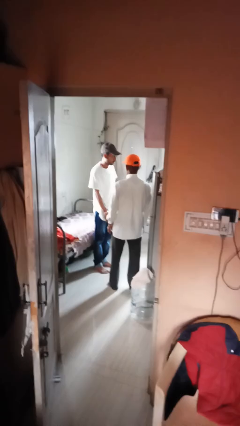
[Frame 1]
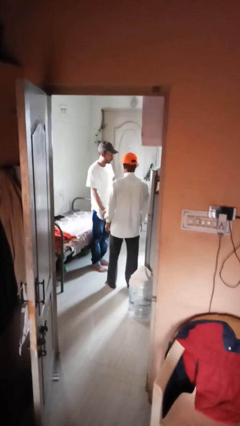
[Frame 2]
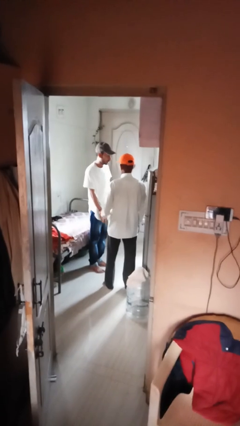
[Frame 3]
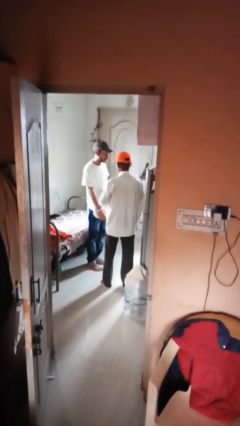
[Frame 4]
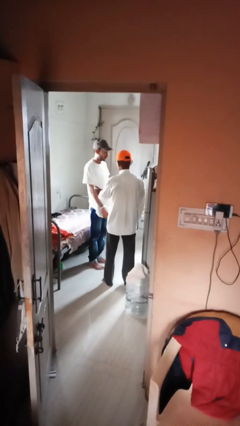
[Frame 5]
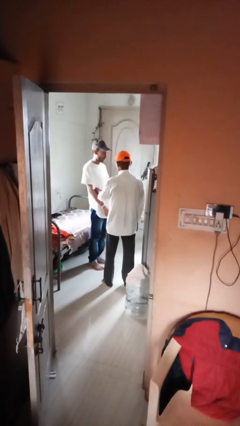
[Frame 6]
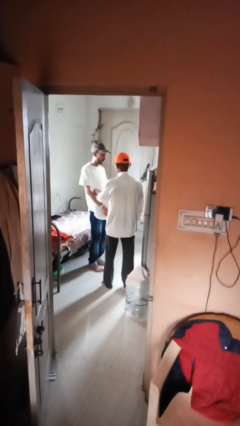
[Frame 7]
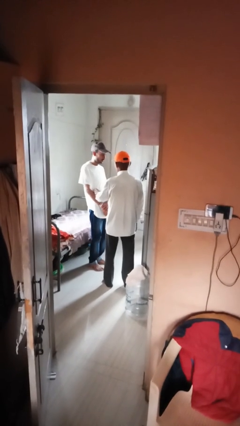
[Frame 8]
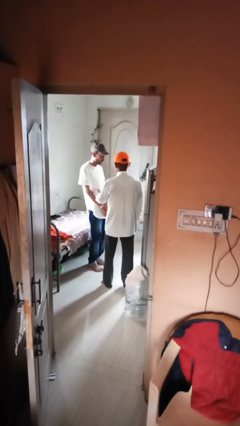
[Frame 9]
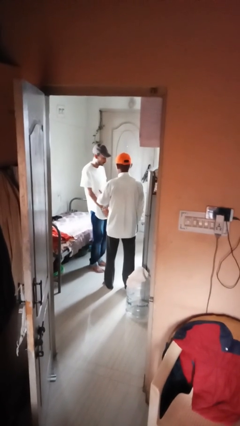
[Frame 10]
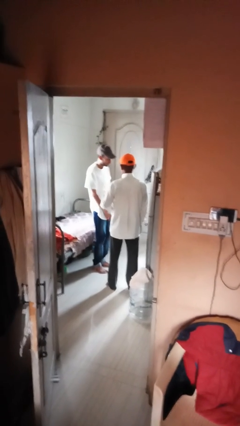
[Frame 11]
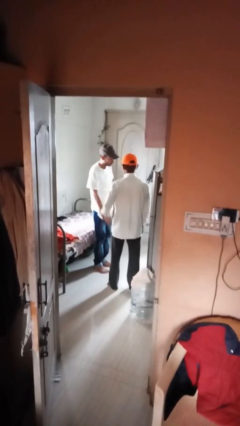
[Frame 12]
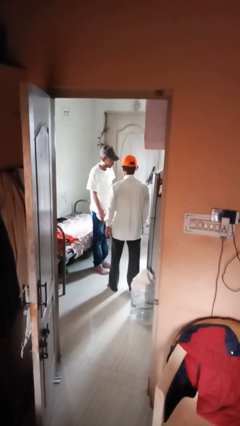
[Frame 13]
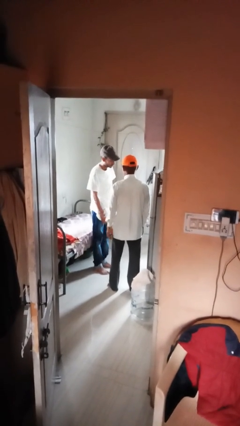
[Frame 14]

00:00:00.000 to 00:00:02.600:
person tickles person

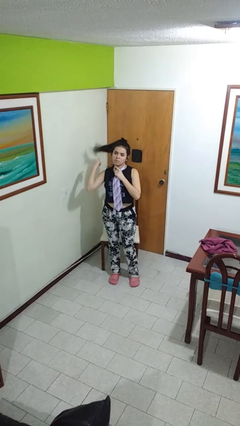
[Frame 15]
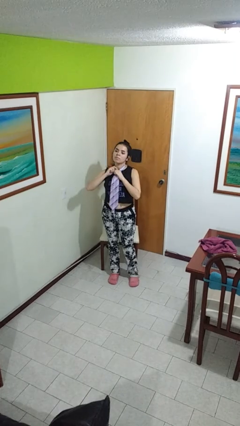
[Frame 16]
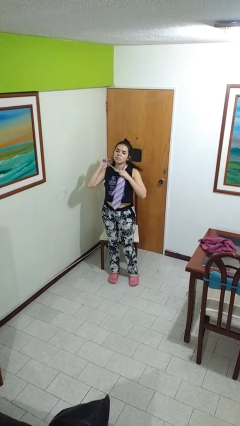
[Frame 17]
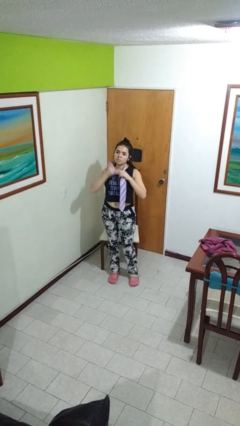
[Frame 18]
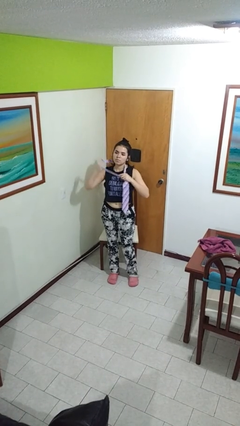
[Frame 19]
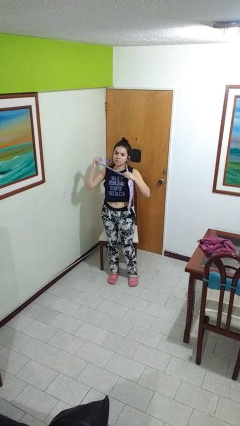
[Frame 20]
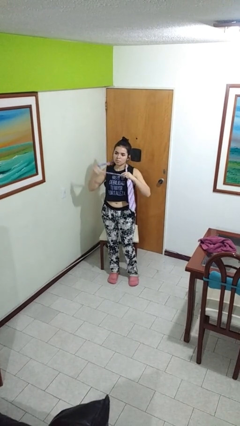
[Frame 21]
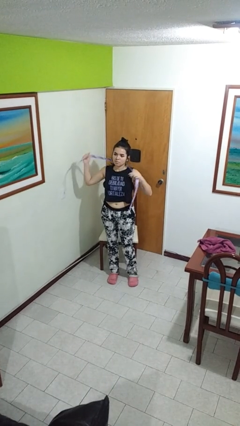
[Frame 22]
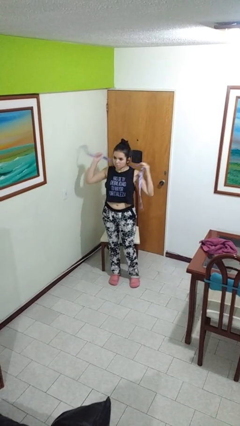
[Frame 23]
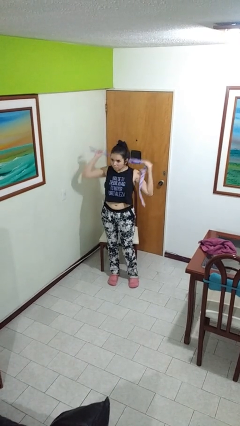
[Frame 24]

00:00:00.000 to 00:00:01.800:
person takes off necktie

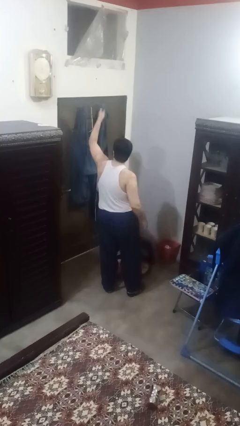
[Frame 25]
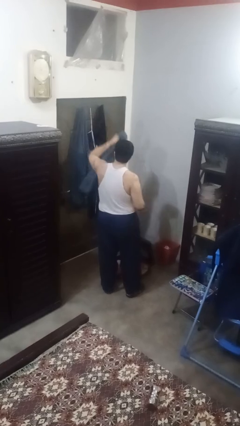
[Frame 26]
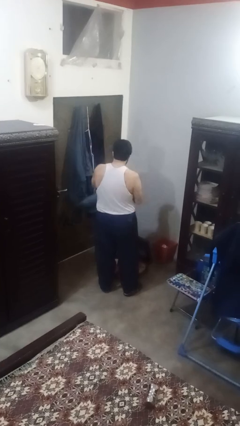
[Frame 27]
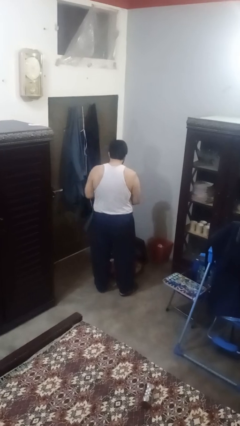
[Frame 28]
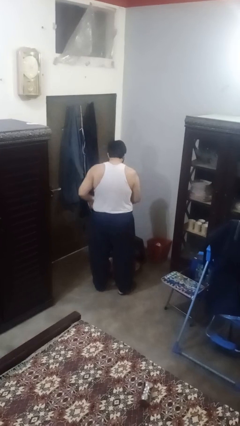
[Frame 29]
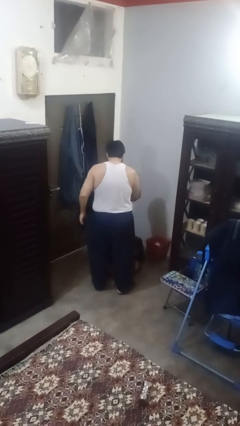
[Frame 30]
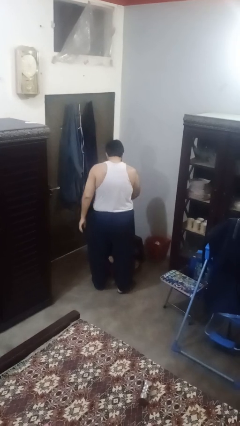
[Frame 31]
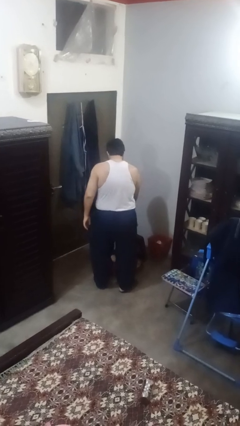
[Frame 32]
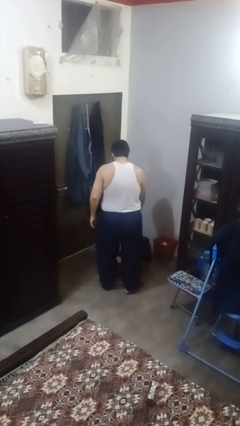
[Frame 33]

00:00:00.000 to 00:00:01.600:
person loads clothes into suitcase

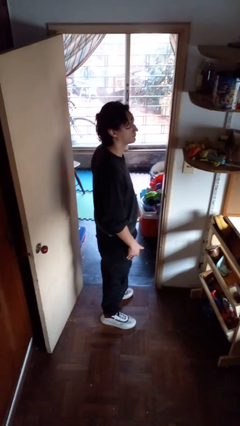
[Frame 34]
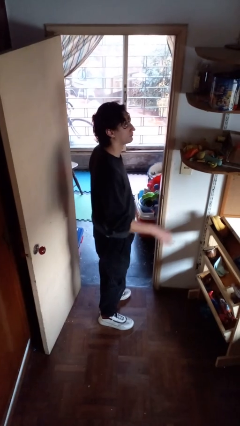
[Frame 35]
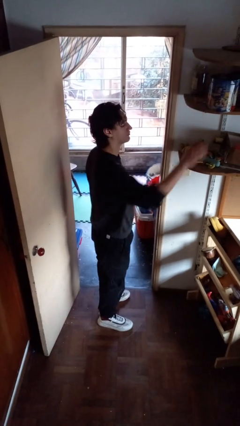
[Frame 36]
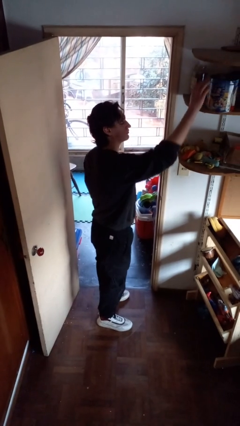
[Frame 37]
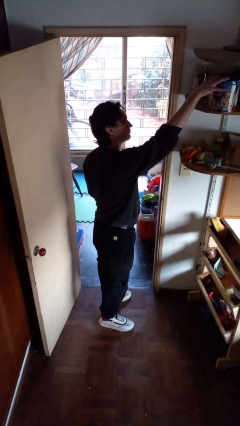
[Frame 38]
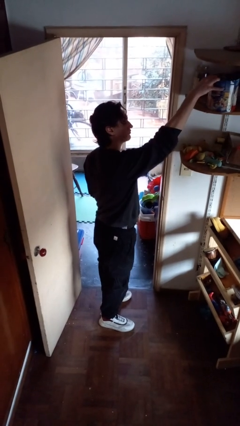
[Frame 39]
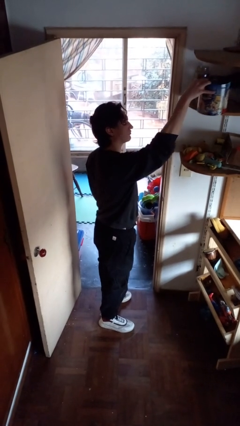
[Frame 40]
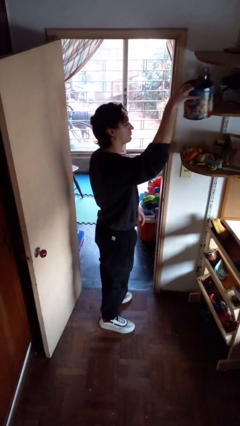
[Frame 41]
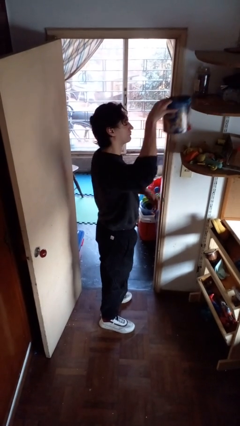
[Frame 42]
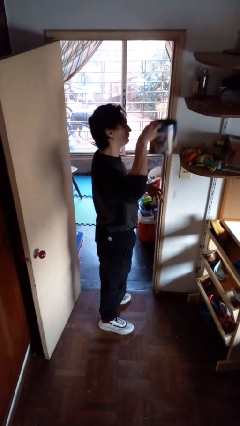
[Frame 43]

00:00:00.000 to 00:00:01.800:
person picks up object from shelf

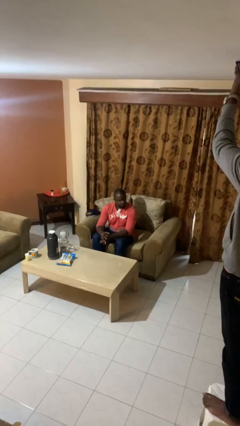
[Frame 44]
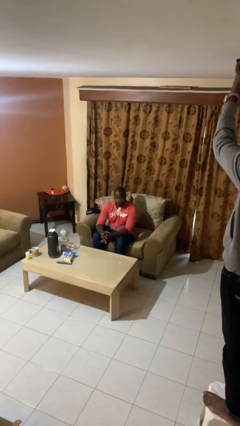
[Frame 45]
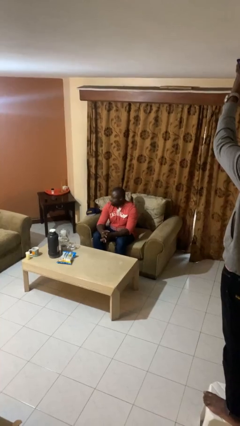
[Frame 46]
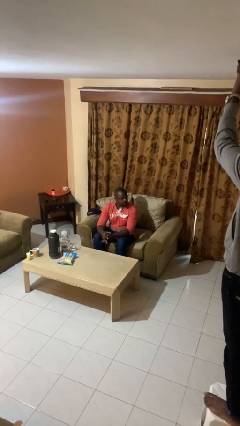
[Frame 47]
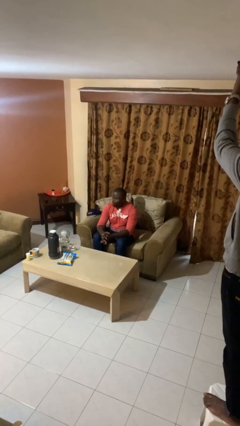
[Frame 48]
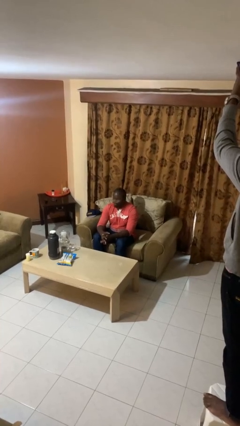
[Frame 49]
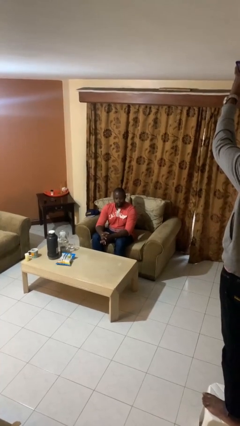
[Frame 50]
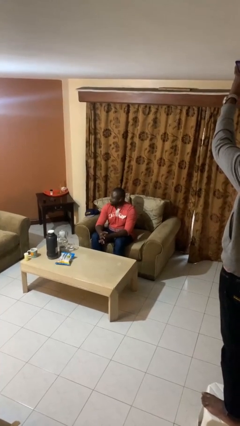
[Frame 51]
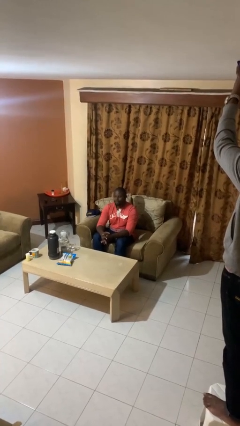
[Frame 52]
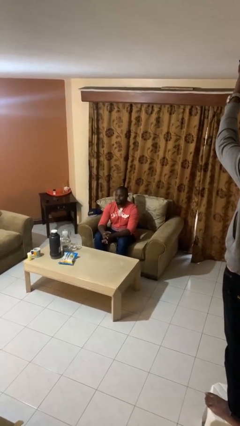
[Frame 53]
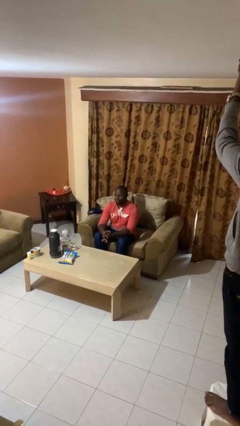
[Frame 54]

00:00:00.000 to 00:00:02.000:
person shakes head

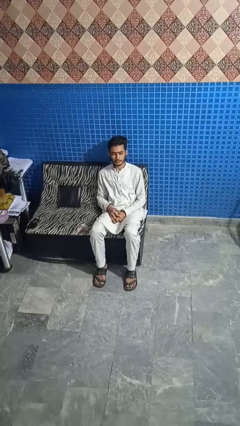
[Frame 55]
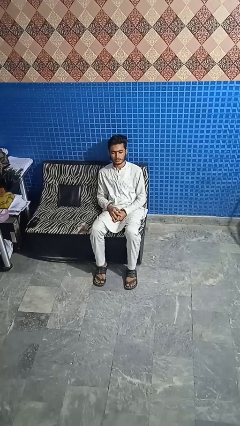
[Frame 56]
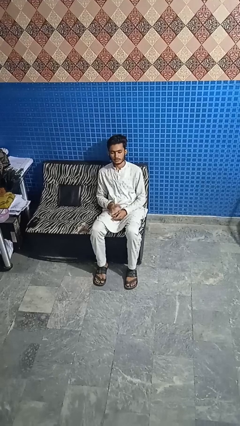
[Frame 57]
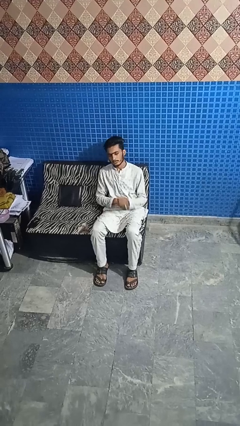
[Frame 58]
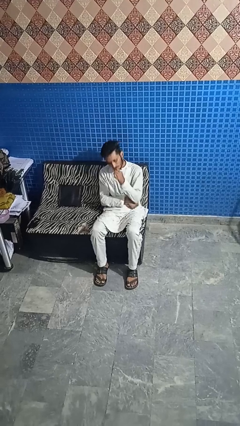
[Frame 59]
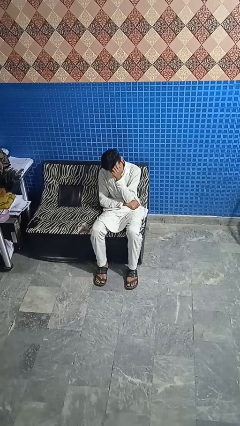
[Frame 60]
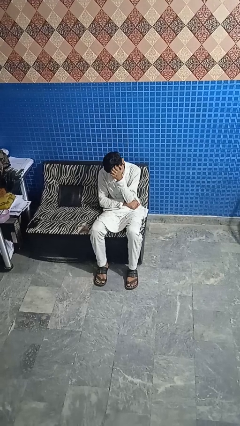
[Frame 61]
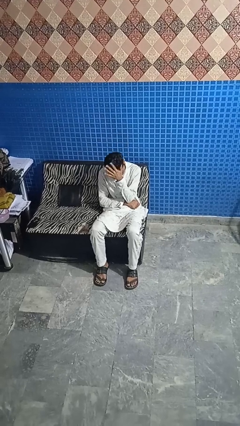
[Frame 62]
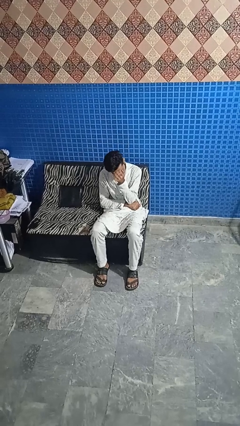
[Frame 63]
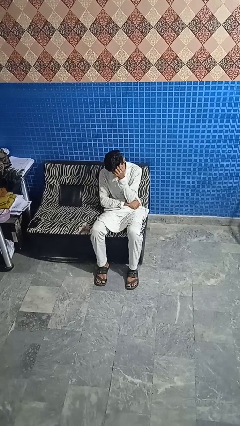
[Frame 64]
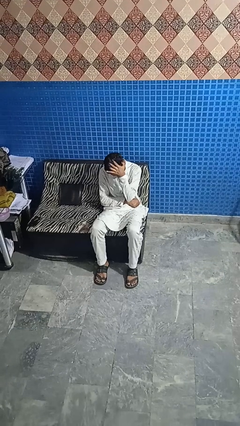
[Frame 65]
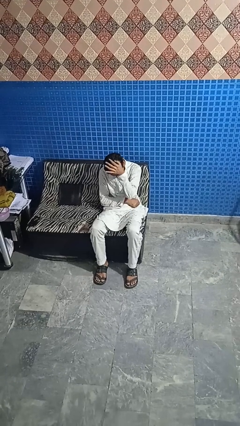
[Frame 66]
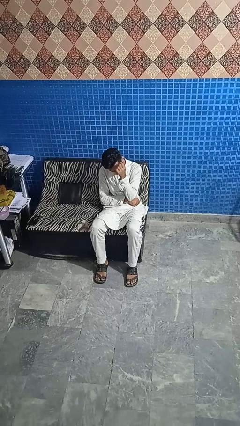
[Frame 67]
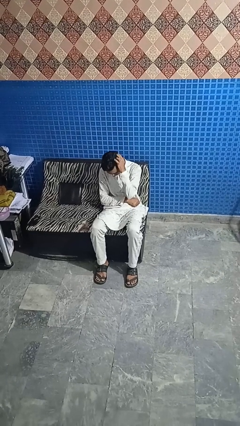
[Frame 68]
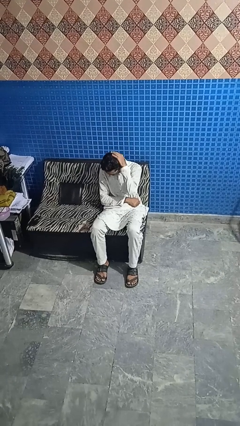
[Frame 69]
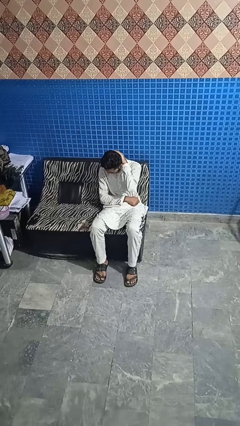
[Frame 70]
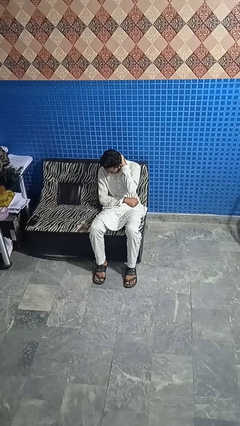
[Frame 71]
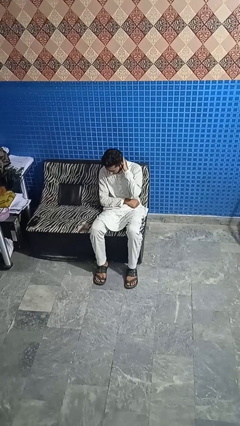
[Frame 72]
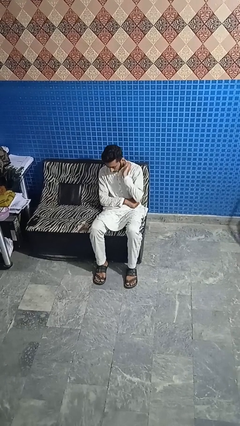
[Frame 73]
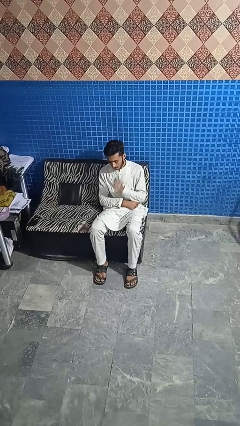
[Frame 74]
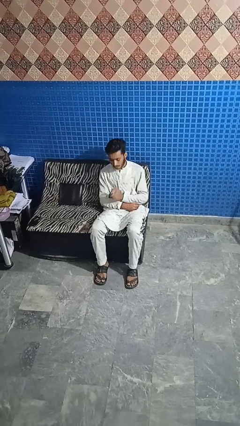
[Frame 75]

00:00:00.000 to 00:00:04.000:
person strokes hair

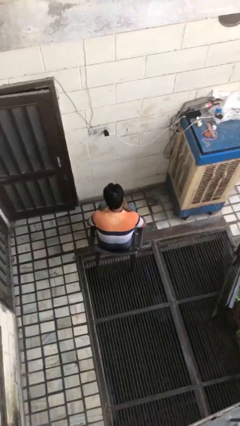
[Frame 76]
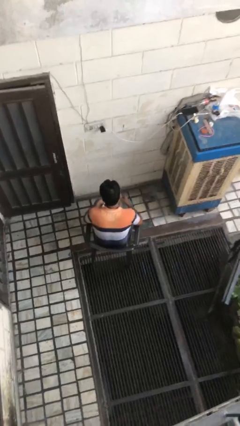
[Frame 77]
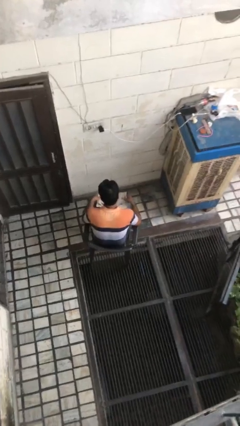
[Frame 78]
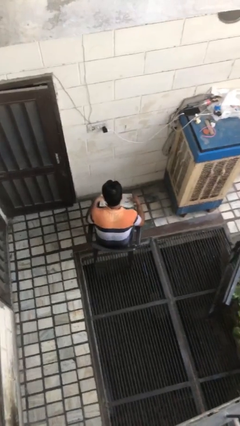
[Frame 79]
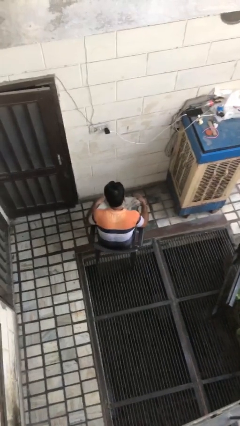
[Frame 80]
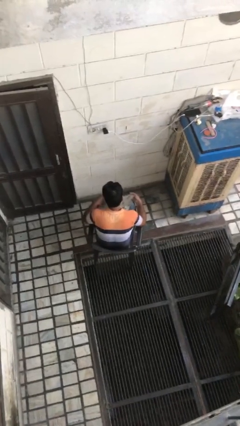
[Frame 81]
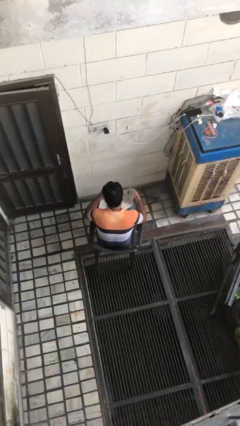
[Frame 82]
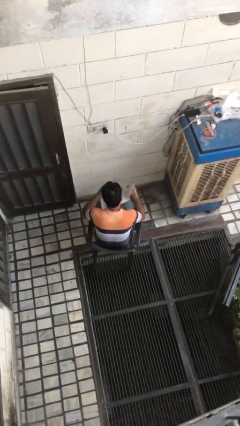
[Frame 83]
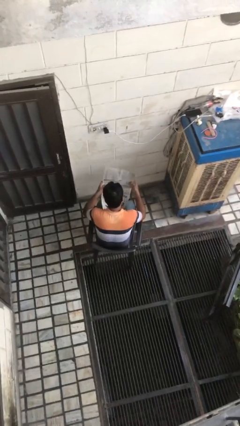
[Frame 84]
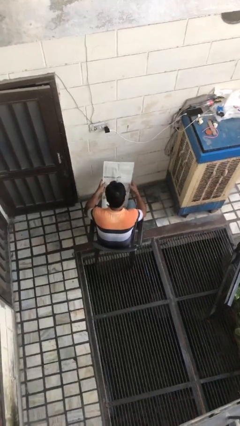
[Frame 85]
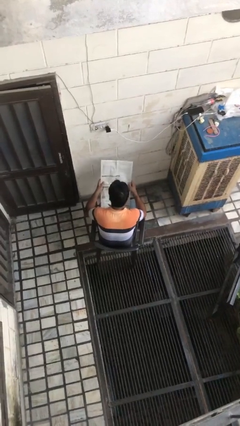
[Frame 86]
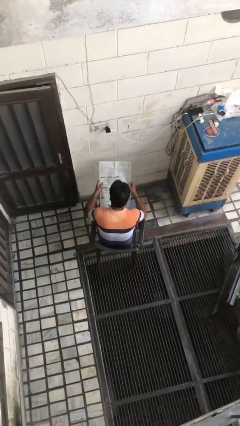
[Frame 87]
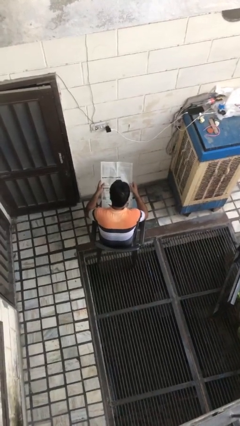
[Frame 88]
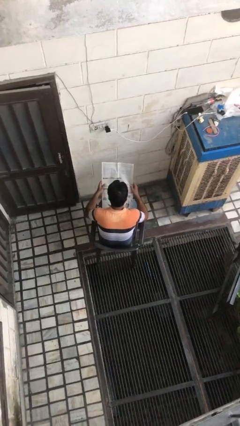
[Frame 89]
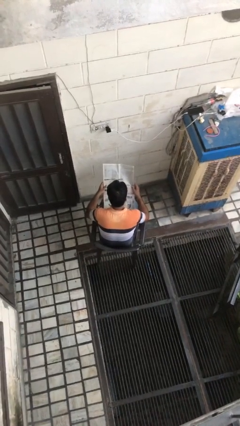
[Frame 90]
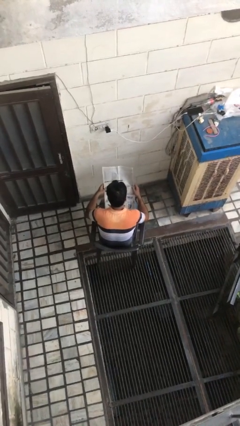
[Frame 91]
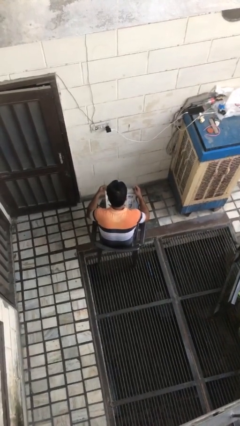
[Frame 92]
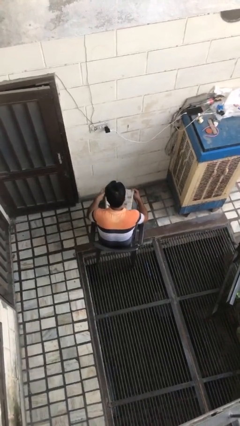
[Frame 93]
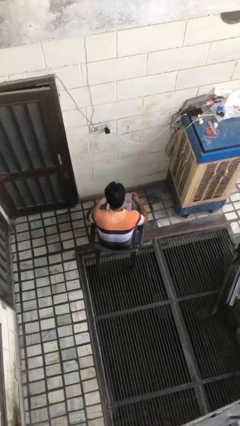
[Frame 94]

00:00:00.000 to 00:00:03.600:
person reads newspaper
